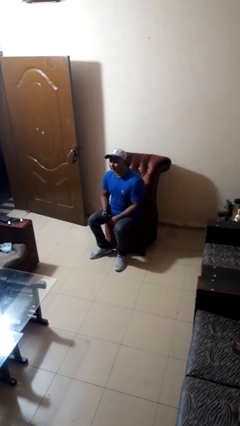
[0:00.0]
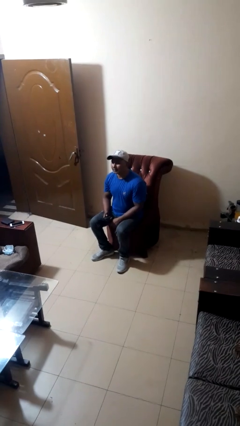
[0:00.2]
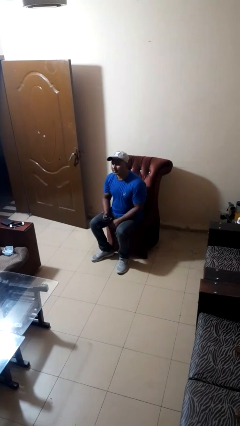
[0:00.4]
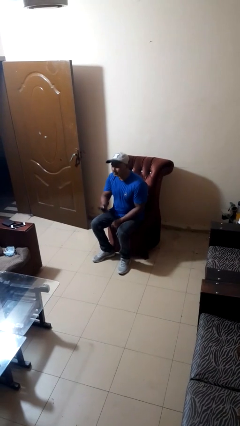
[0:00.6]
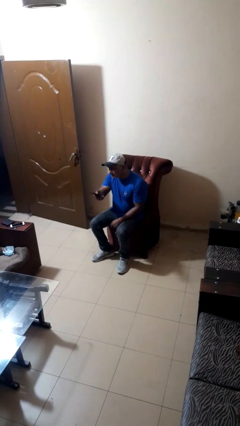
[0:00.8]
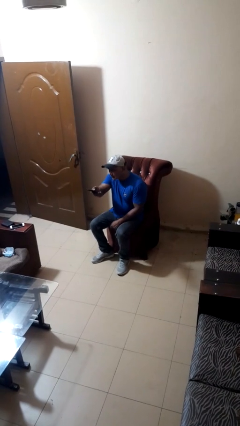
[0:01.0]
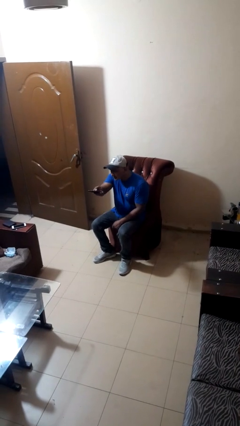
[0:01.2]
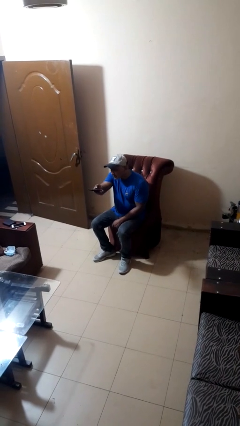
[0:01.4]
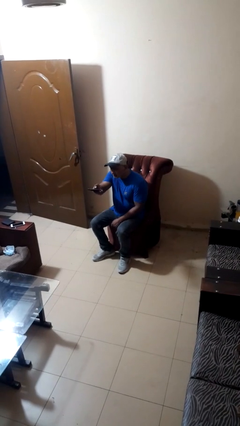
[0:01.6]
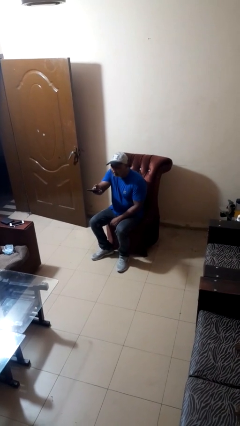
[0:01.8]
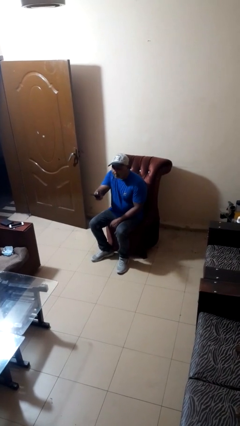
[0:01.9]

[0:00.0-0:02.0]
person uses television remote

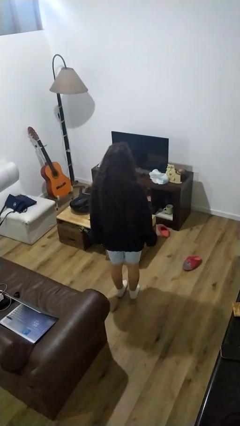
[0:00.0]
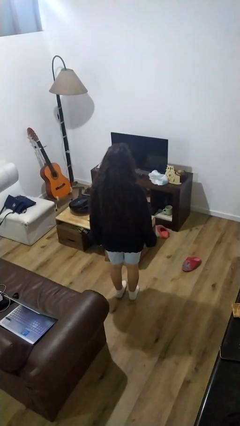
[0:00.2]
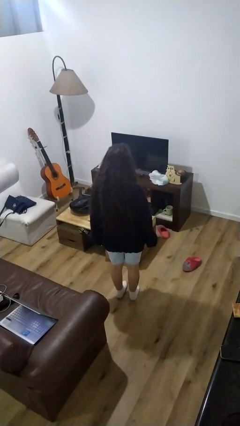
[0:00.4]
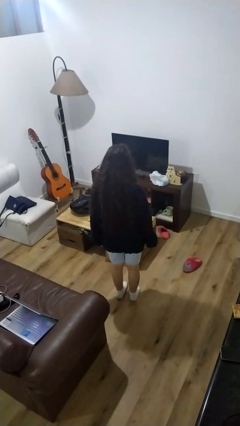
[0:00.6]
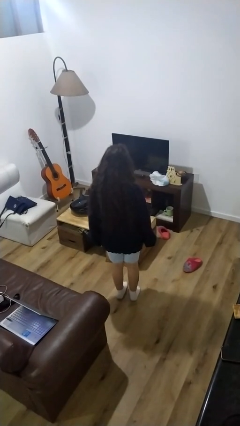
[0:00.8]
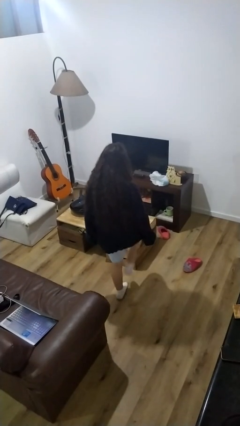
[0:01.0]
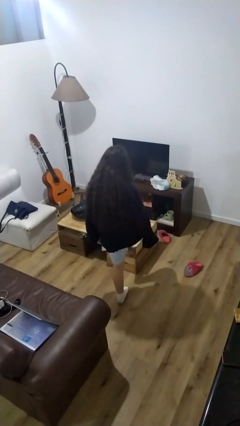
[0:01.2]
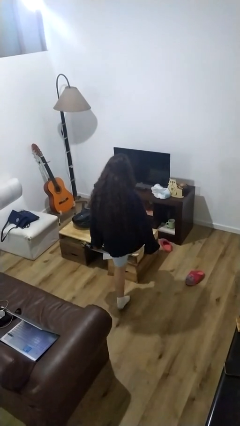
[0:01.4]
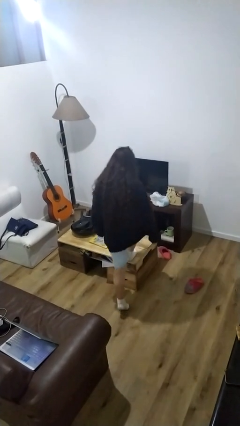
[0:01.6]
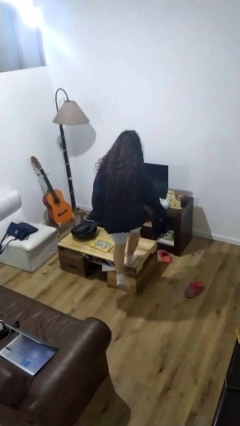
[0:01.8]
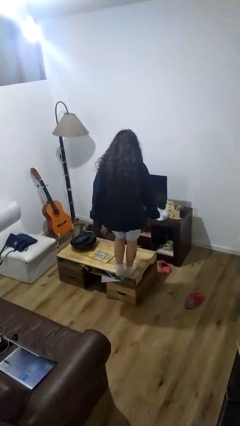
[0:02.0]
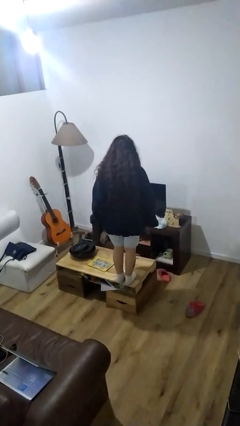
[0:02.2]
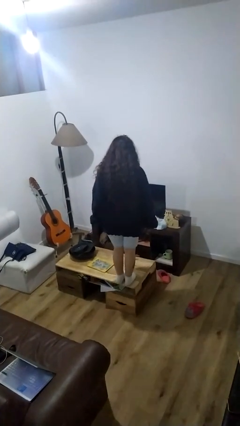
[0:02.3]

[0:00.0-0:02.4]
person climbs on table

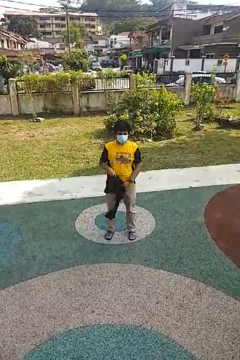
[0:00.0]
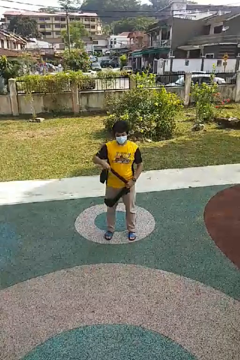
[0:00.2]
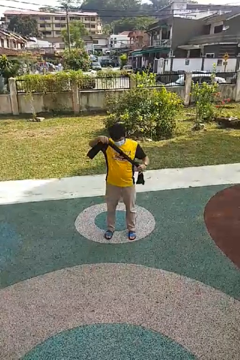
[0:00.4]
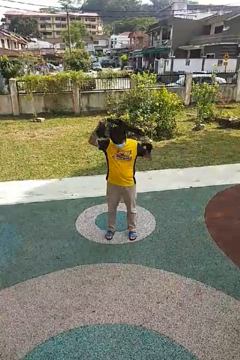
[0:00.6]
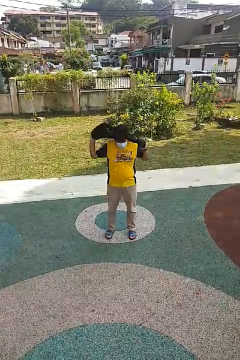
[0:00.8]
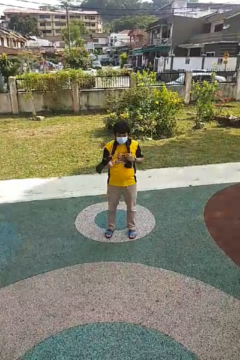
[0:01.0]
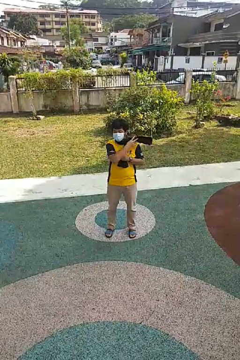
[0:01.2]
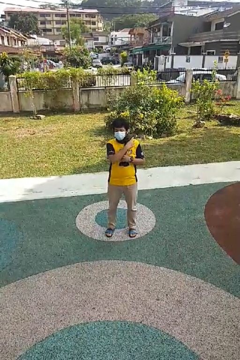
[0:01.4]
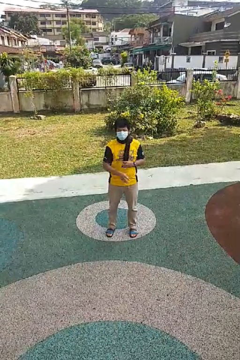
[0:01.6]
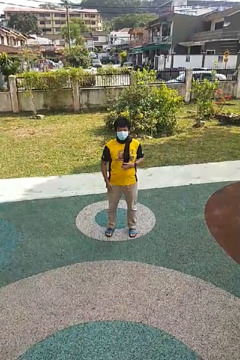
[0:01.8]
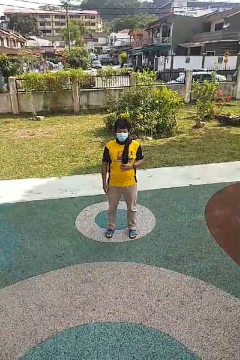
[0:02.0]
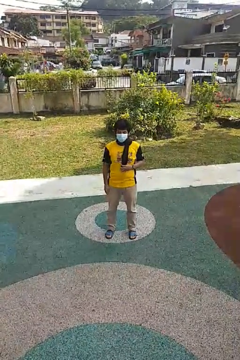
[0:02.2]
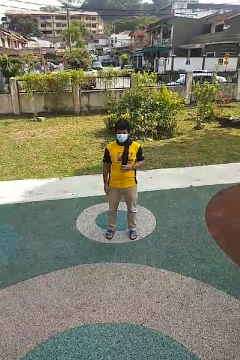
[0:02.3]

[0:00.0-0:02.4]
person puts on scarf

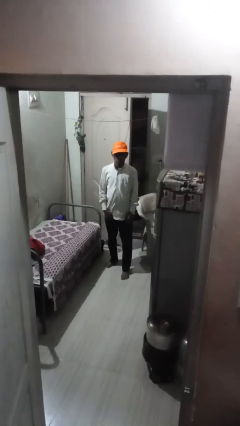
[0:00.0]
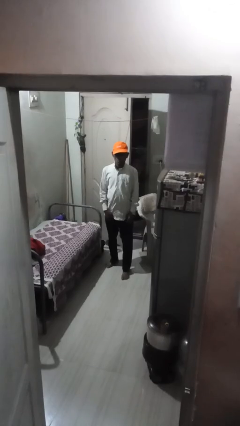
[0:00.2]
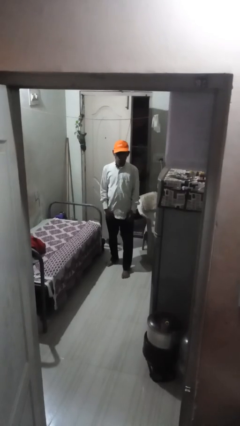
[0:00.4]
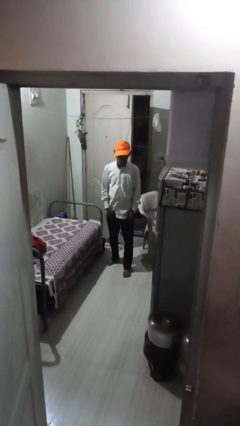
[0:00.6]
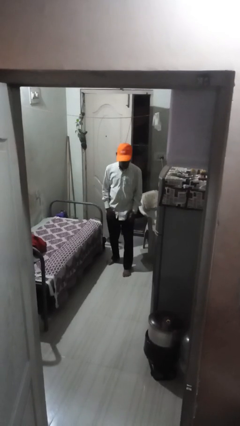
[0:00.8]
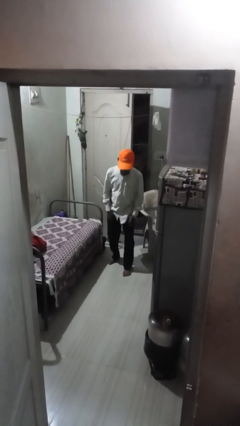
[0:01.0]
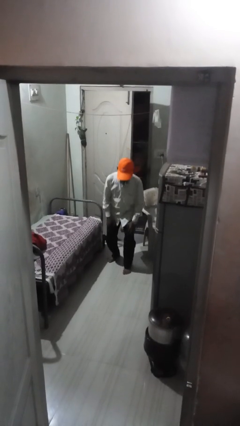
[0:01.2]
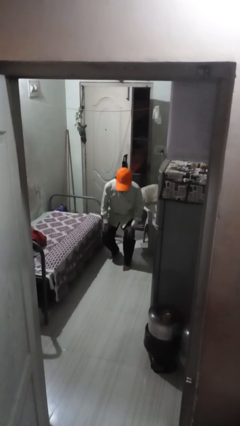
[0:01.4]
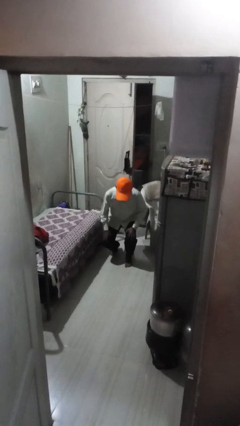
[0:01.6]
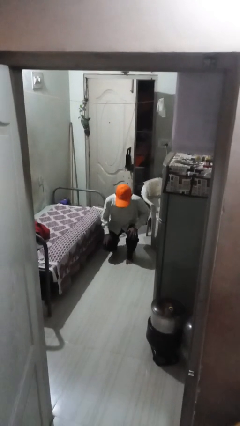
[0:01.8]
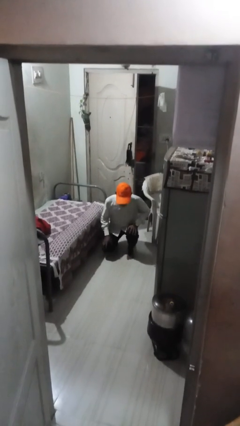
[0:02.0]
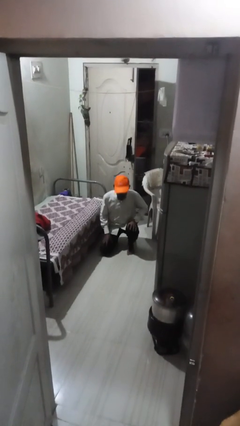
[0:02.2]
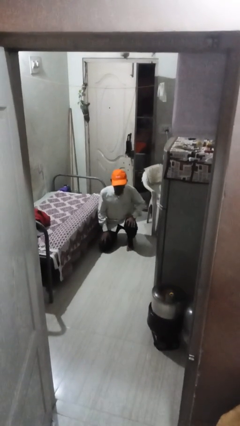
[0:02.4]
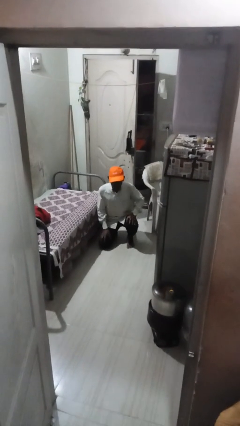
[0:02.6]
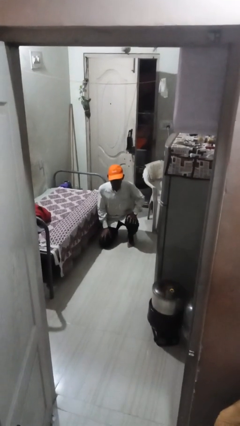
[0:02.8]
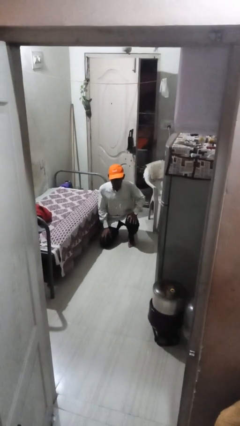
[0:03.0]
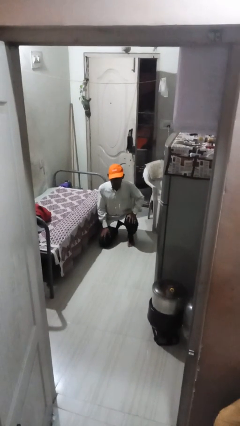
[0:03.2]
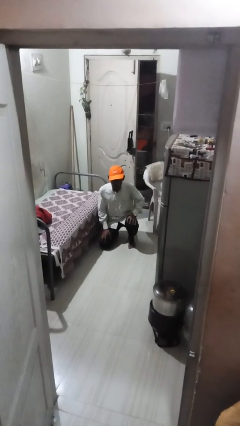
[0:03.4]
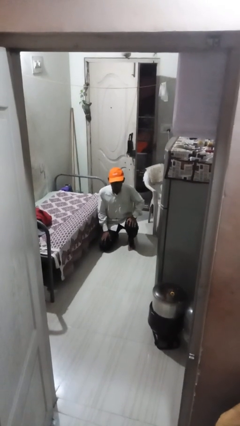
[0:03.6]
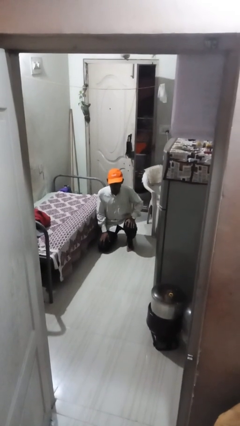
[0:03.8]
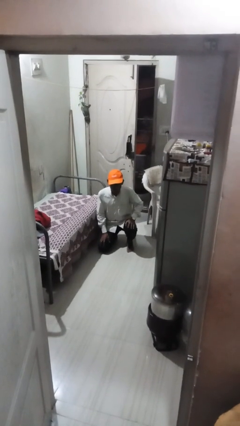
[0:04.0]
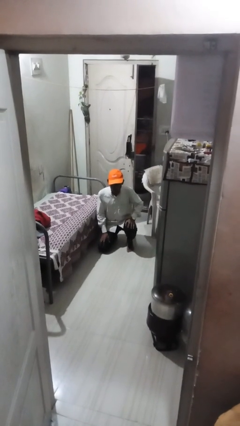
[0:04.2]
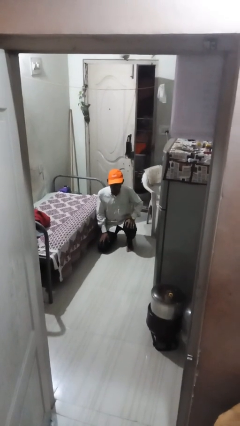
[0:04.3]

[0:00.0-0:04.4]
person kneels

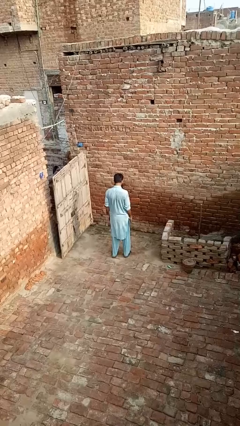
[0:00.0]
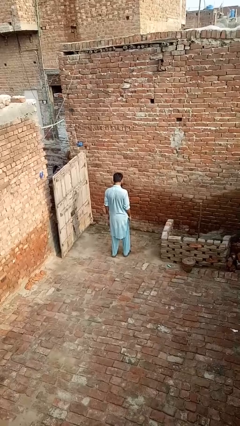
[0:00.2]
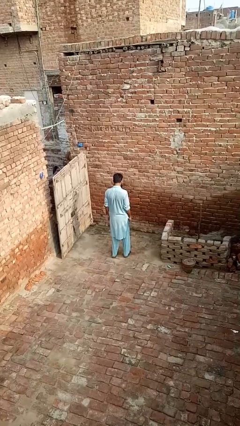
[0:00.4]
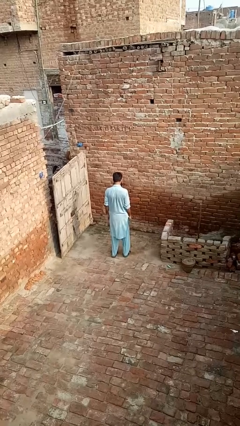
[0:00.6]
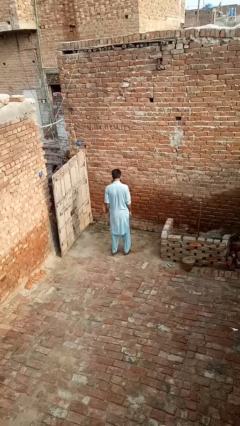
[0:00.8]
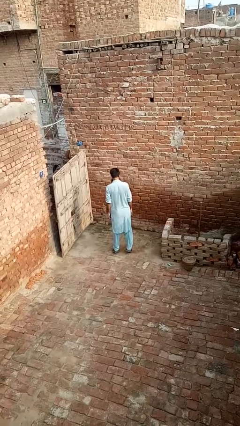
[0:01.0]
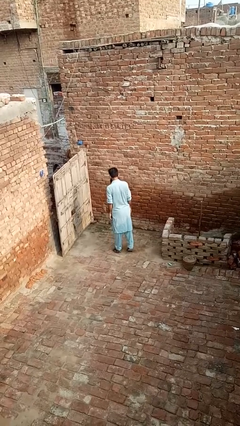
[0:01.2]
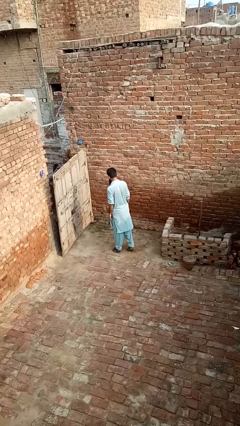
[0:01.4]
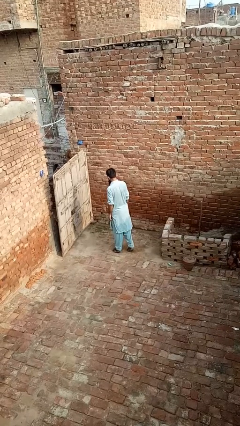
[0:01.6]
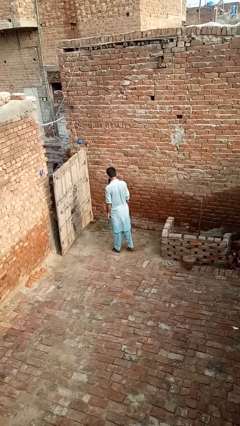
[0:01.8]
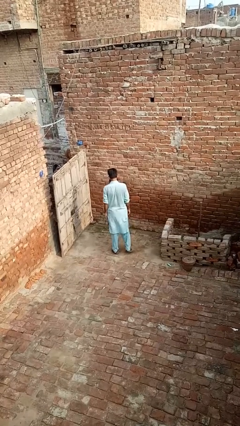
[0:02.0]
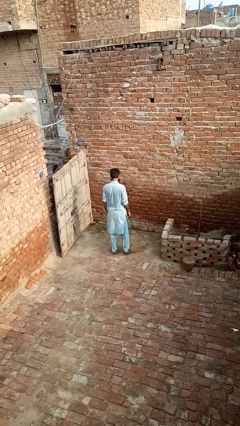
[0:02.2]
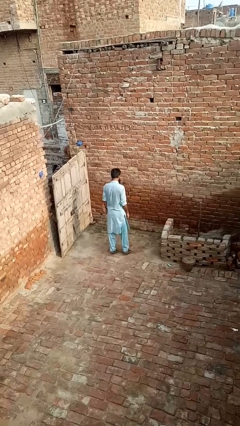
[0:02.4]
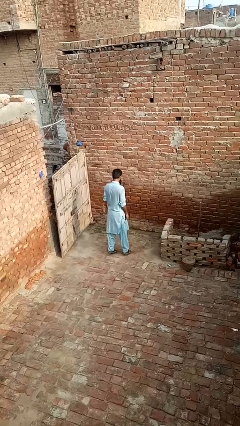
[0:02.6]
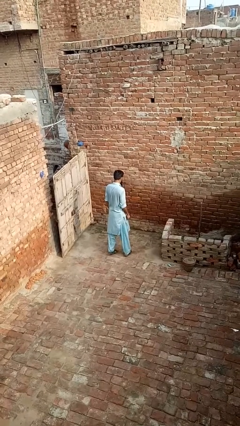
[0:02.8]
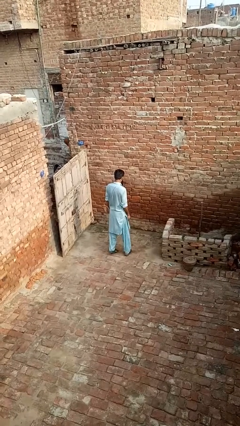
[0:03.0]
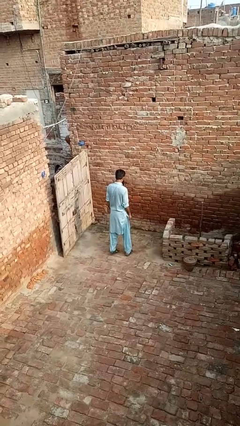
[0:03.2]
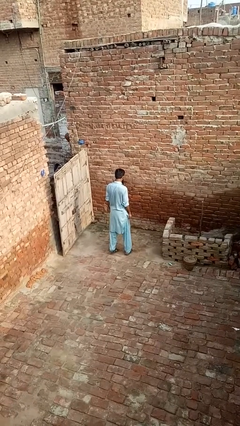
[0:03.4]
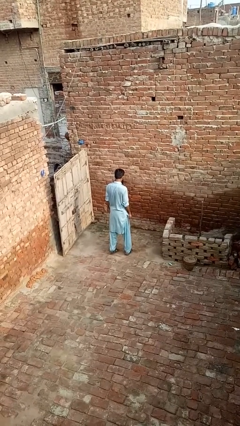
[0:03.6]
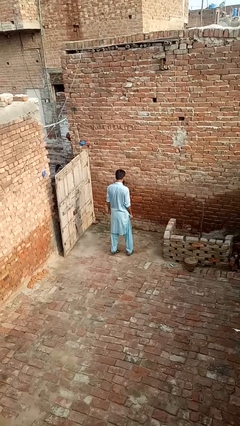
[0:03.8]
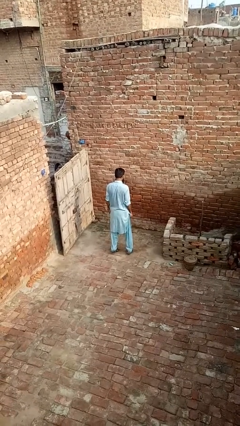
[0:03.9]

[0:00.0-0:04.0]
person twirls

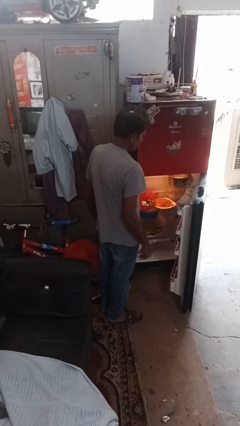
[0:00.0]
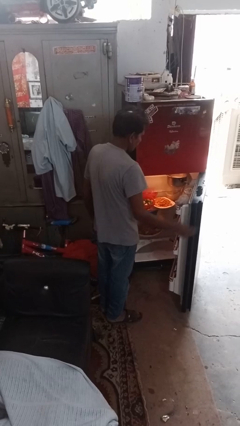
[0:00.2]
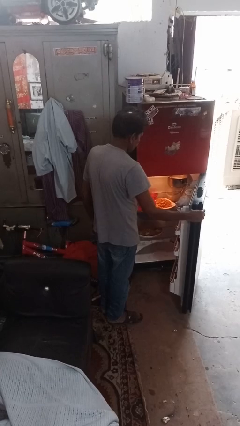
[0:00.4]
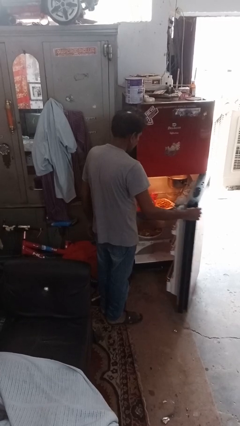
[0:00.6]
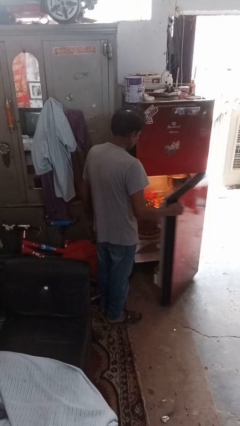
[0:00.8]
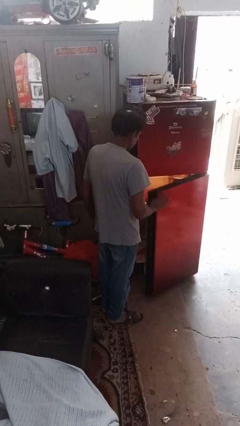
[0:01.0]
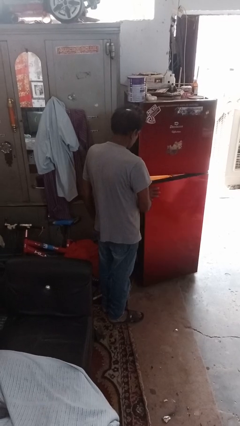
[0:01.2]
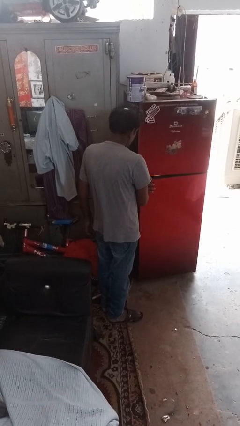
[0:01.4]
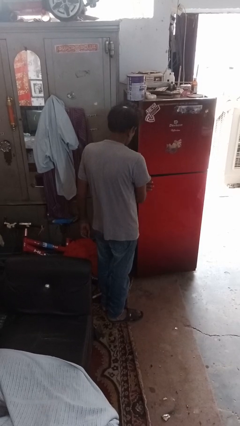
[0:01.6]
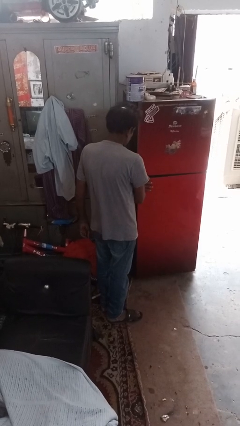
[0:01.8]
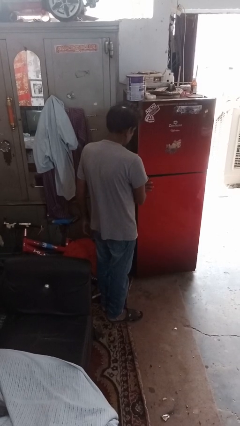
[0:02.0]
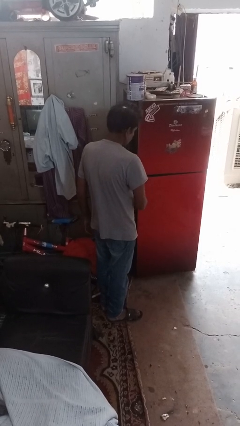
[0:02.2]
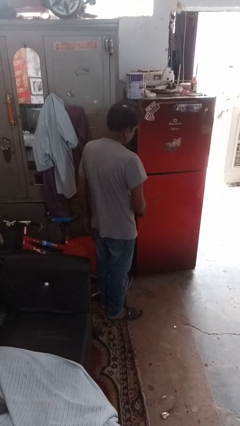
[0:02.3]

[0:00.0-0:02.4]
person closes refrigerator
